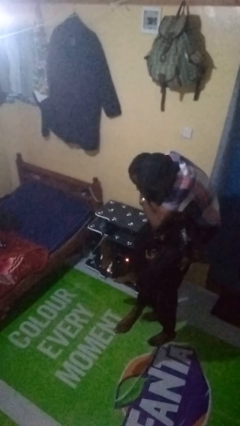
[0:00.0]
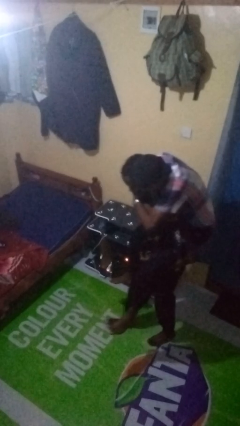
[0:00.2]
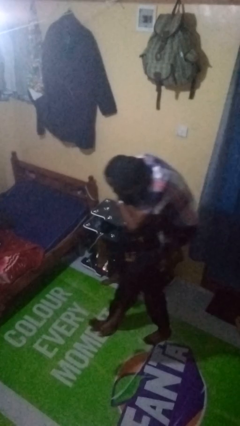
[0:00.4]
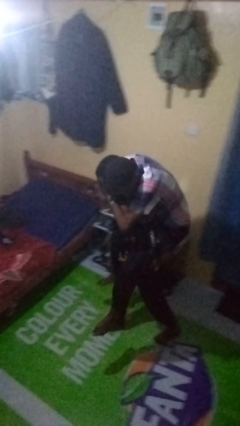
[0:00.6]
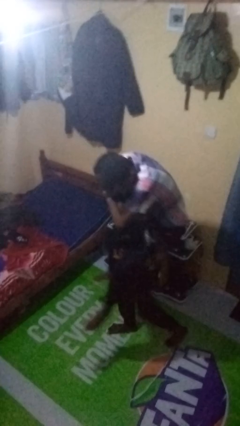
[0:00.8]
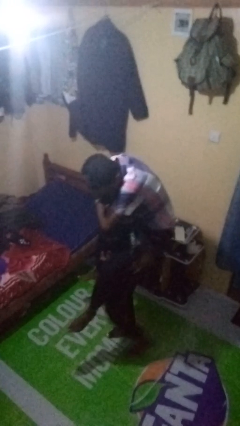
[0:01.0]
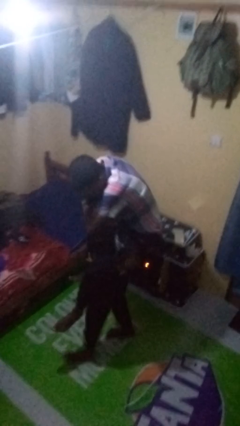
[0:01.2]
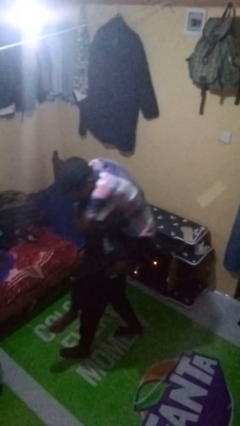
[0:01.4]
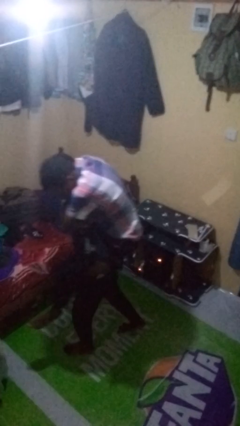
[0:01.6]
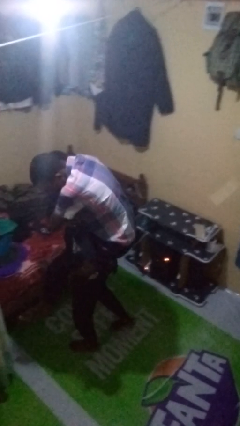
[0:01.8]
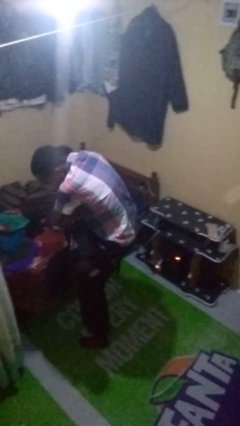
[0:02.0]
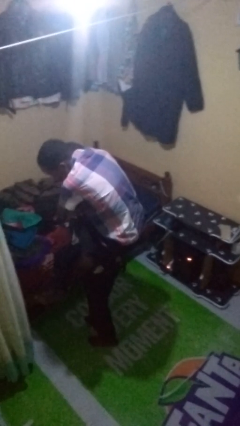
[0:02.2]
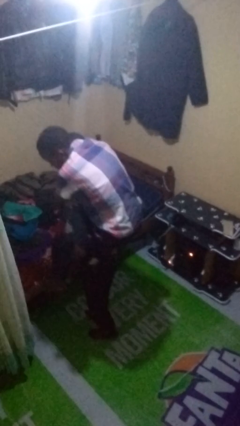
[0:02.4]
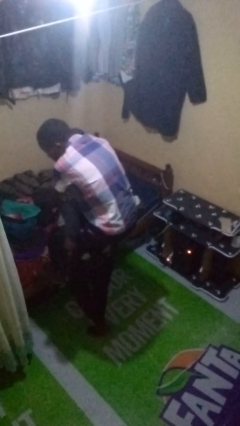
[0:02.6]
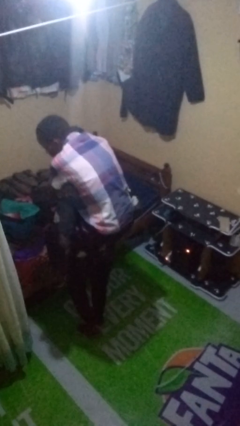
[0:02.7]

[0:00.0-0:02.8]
person carries person on back

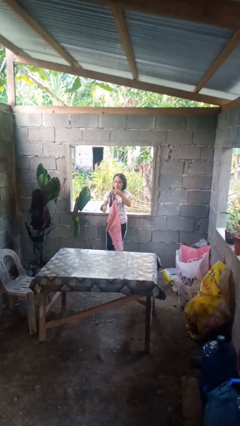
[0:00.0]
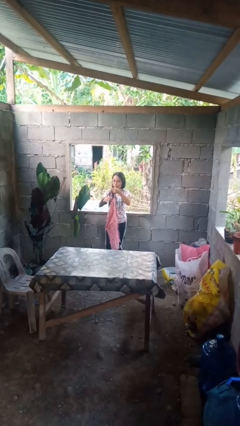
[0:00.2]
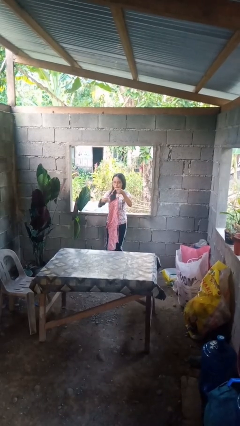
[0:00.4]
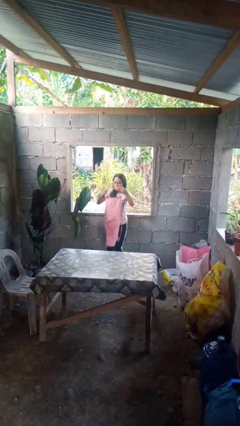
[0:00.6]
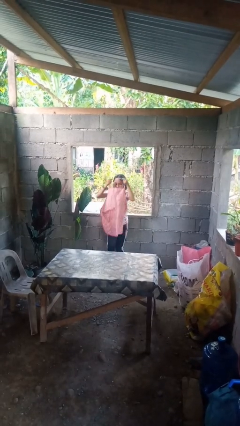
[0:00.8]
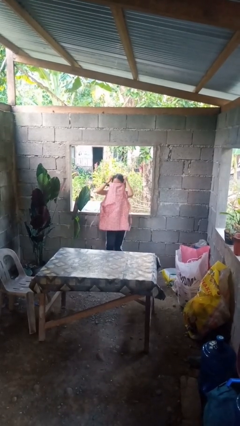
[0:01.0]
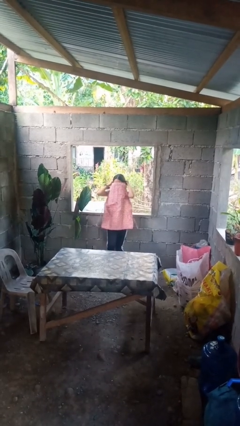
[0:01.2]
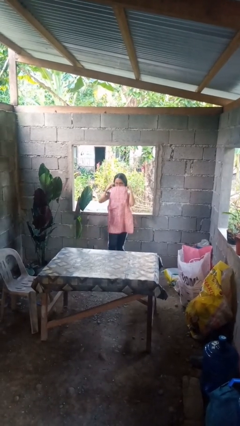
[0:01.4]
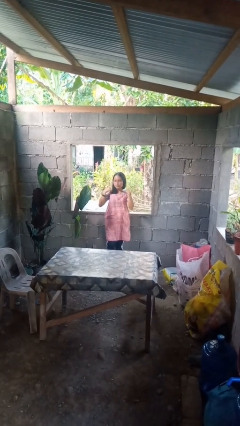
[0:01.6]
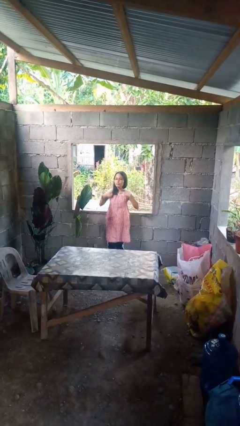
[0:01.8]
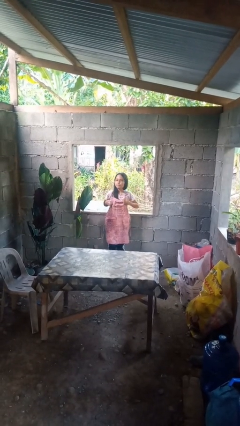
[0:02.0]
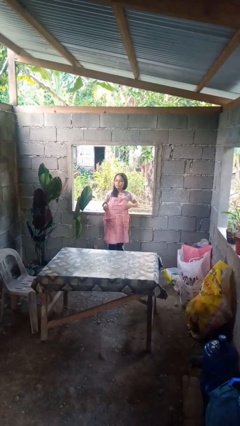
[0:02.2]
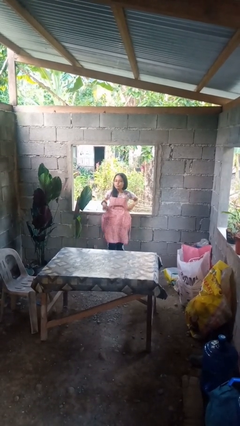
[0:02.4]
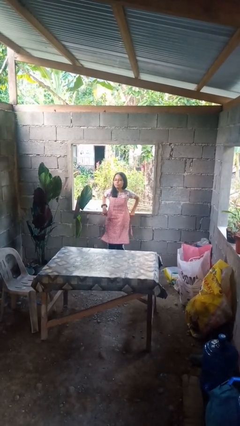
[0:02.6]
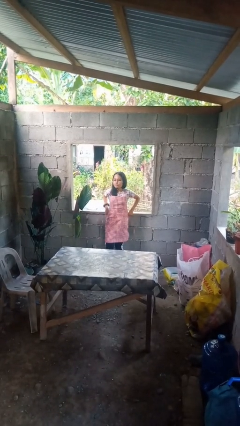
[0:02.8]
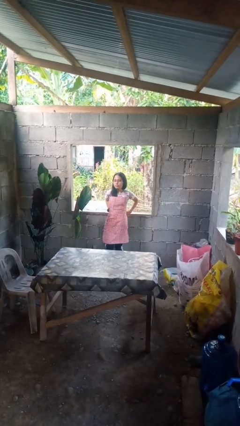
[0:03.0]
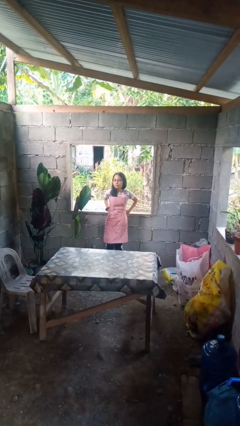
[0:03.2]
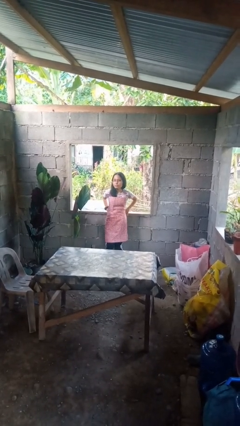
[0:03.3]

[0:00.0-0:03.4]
person puts on apron

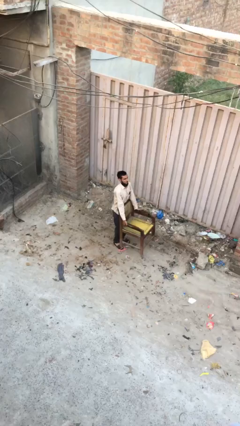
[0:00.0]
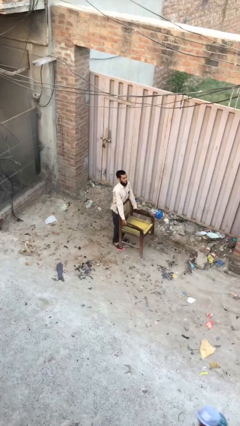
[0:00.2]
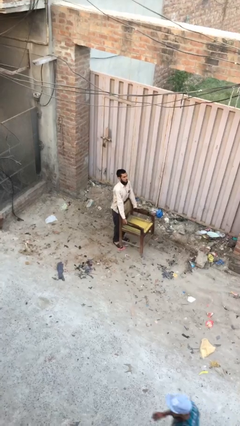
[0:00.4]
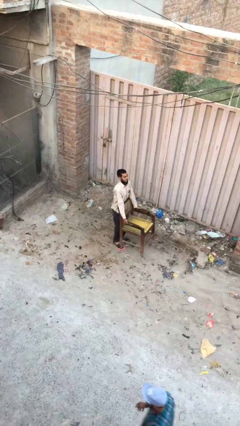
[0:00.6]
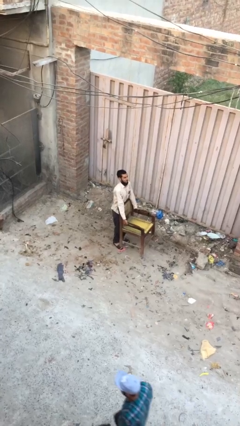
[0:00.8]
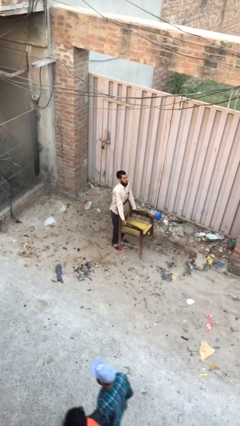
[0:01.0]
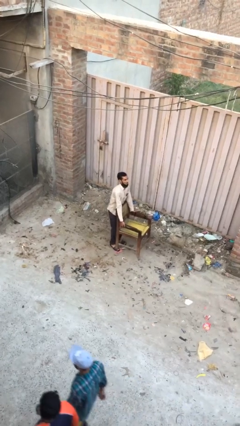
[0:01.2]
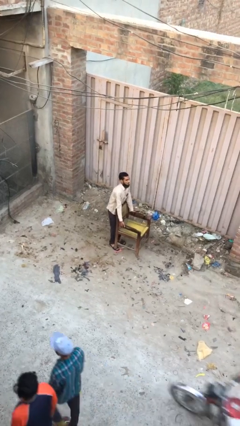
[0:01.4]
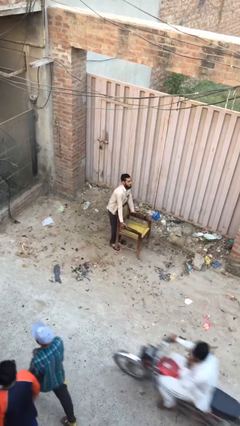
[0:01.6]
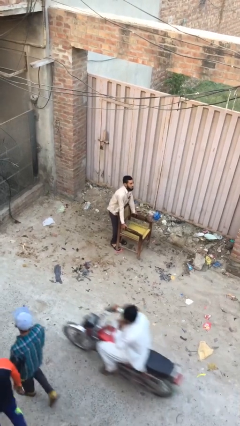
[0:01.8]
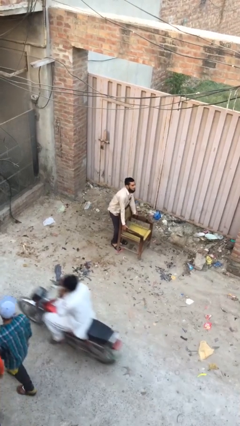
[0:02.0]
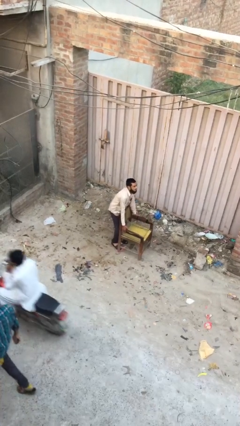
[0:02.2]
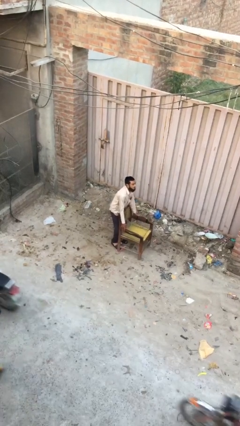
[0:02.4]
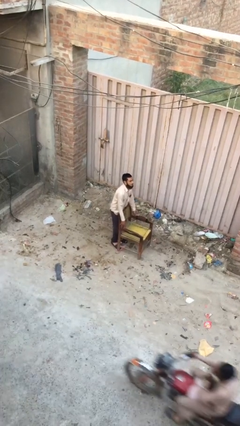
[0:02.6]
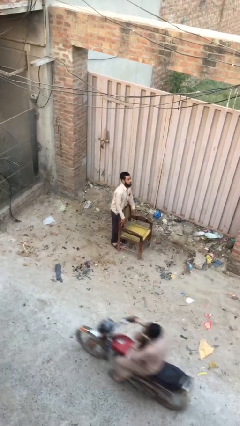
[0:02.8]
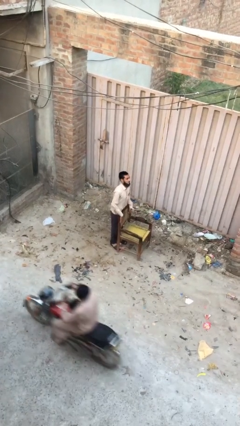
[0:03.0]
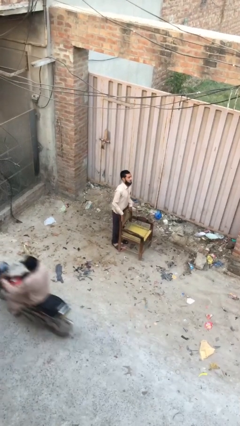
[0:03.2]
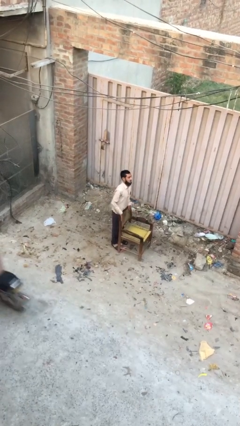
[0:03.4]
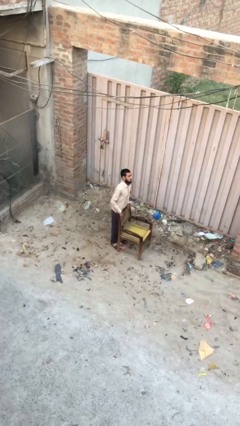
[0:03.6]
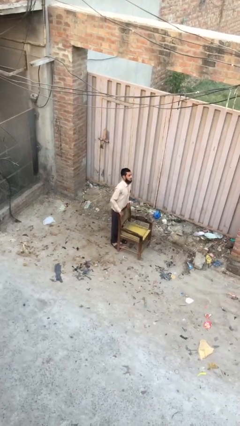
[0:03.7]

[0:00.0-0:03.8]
person puts down object on floor

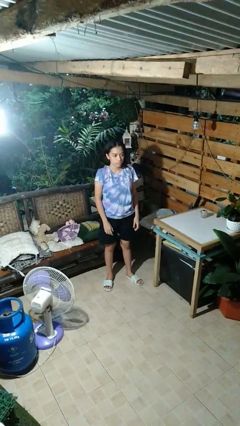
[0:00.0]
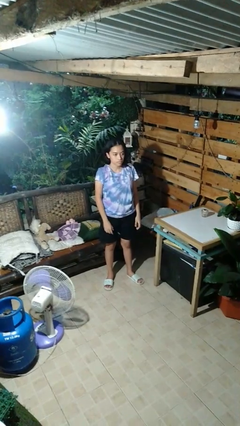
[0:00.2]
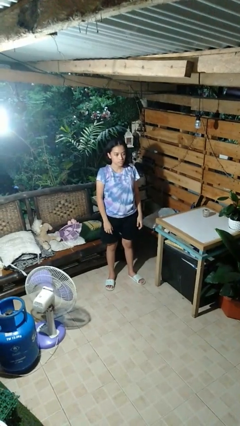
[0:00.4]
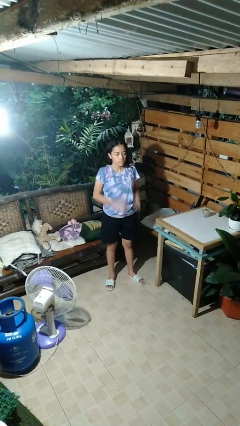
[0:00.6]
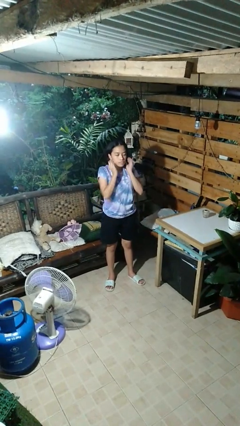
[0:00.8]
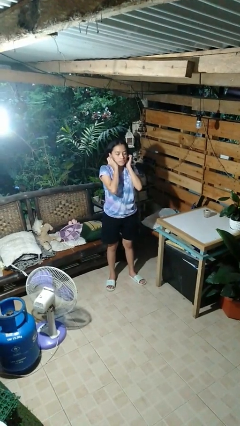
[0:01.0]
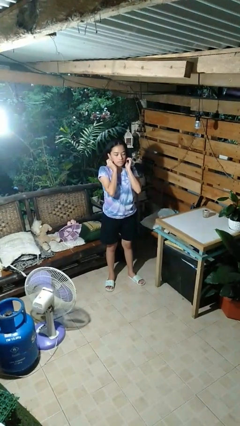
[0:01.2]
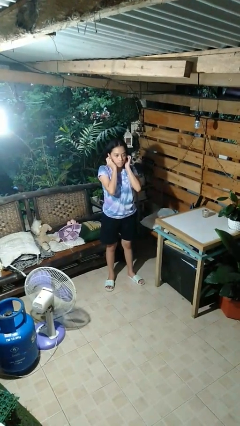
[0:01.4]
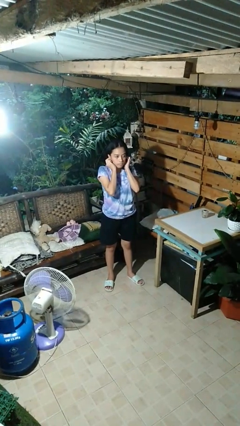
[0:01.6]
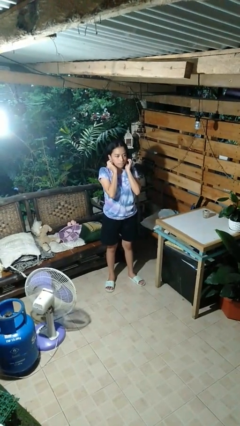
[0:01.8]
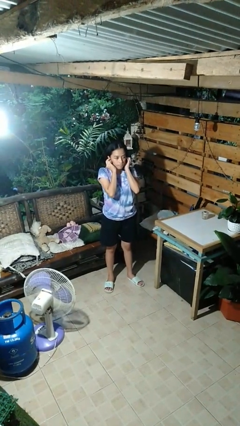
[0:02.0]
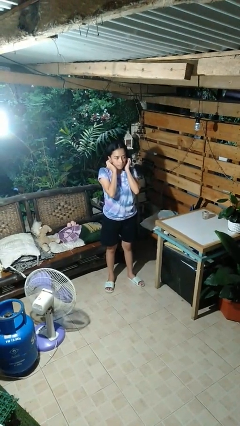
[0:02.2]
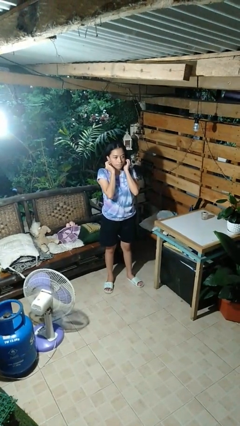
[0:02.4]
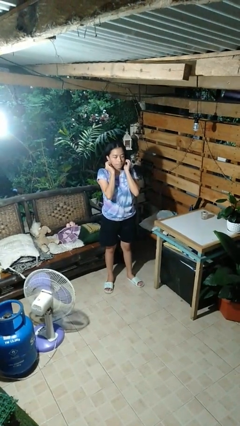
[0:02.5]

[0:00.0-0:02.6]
person touches earlobe

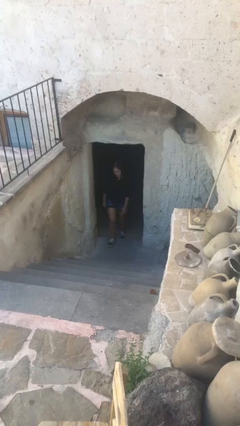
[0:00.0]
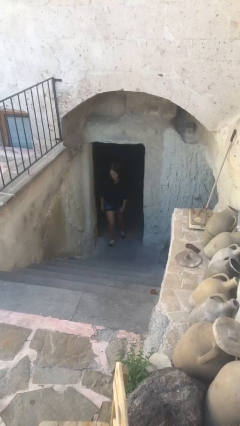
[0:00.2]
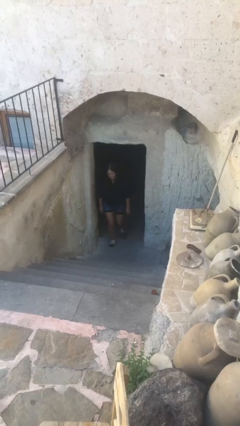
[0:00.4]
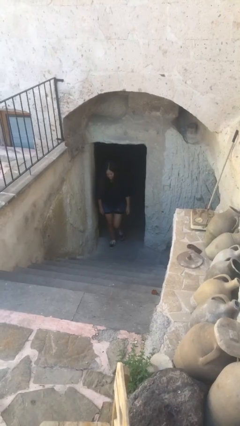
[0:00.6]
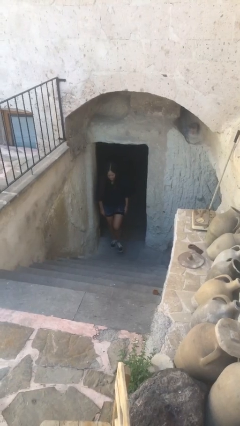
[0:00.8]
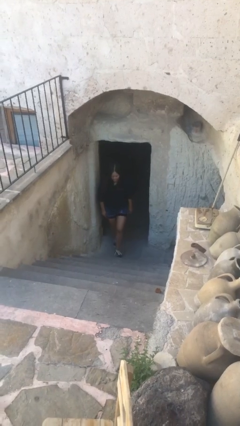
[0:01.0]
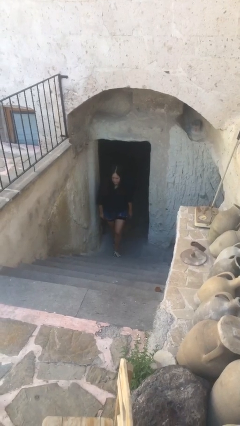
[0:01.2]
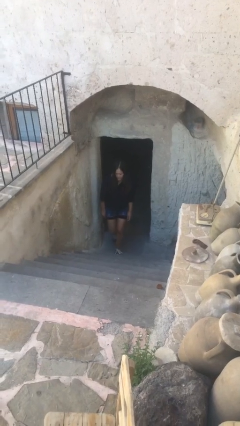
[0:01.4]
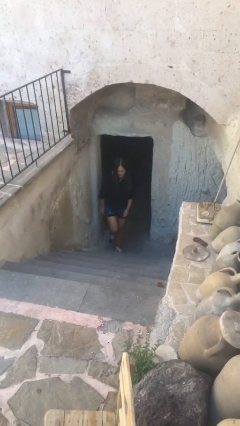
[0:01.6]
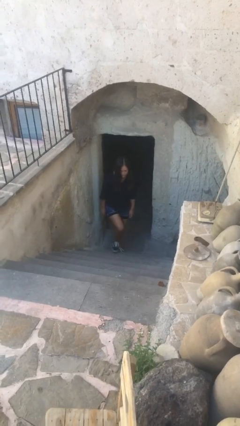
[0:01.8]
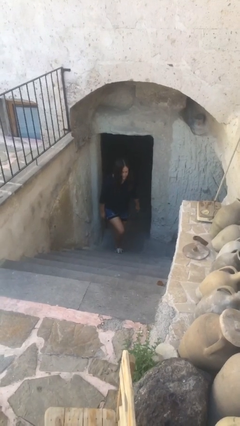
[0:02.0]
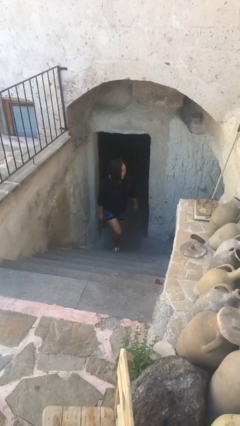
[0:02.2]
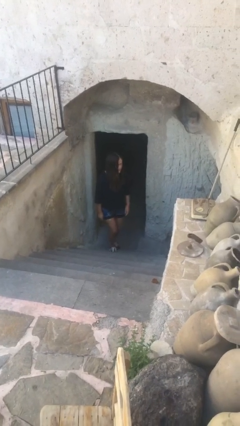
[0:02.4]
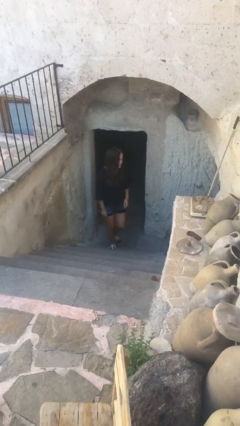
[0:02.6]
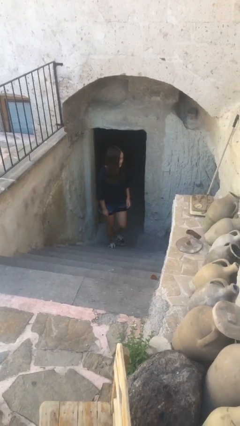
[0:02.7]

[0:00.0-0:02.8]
person enters scene through structure

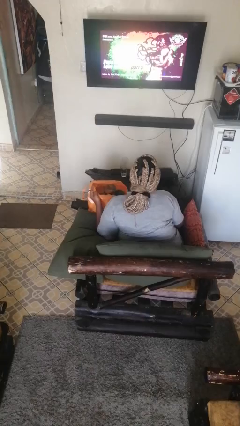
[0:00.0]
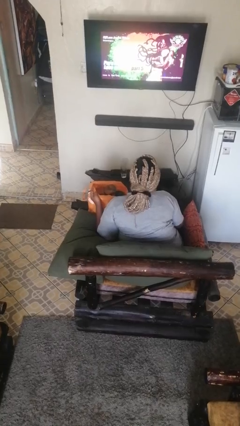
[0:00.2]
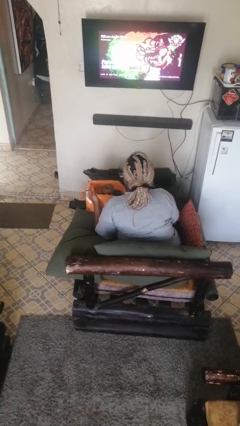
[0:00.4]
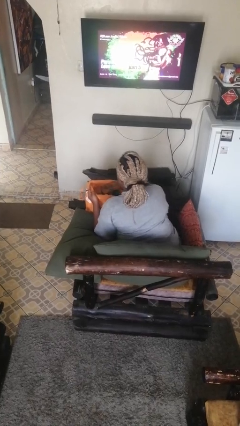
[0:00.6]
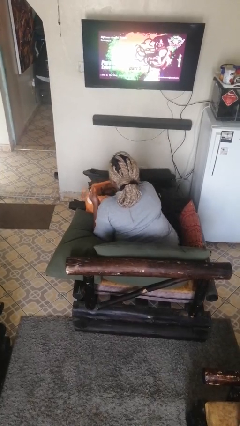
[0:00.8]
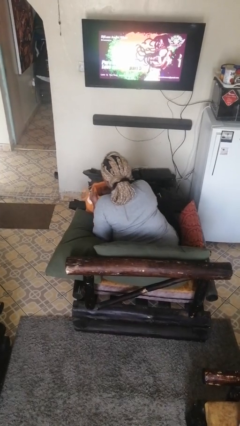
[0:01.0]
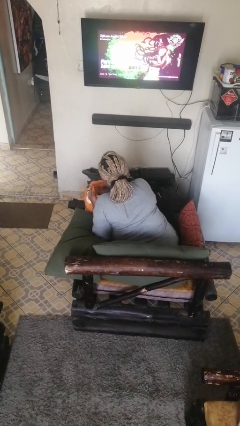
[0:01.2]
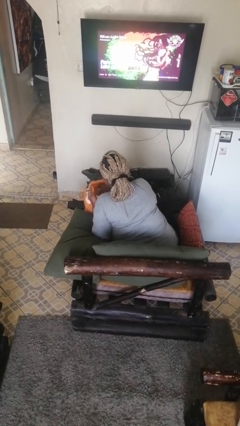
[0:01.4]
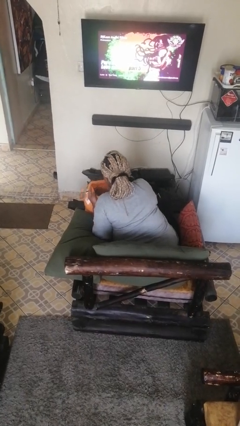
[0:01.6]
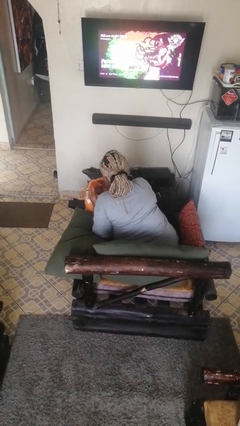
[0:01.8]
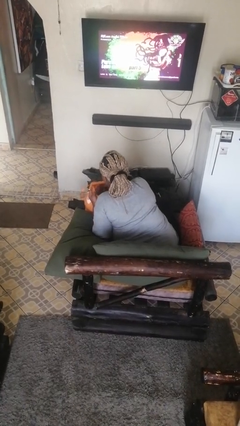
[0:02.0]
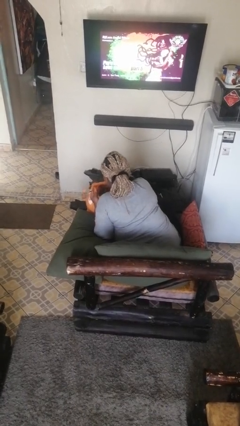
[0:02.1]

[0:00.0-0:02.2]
person searches in bag
